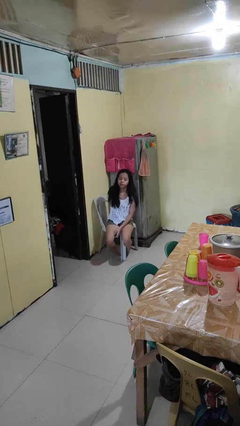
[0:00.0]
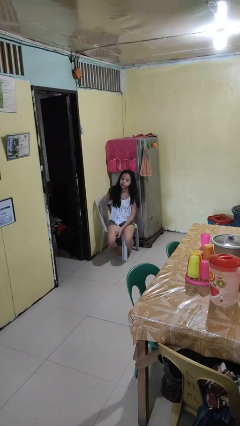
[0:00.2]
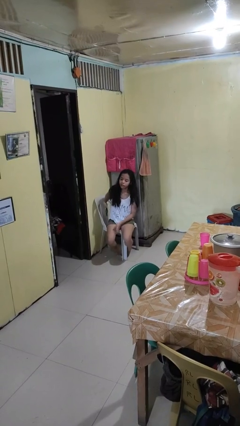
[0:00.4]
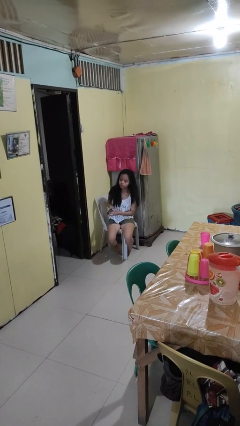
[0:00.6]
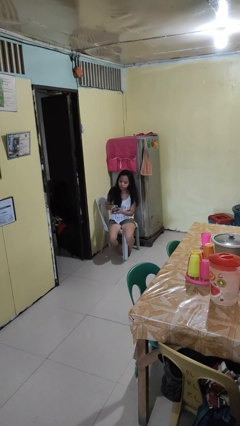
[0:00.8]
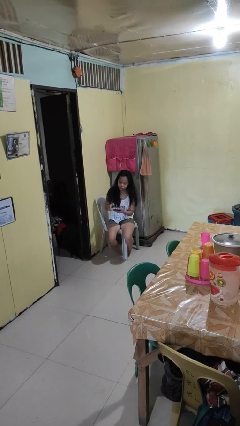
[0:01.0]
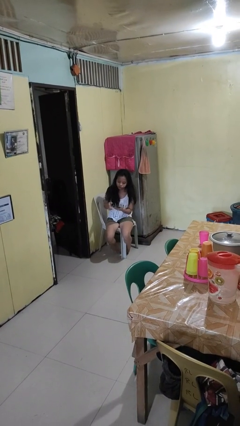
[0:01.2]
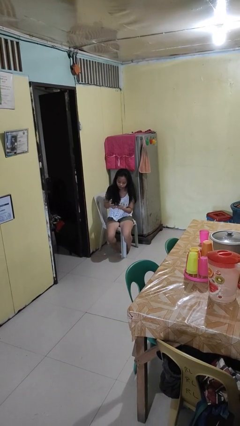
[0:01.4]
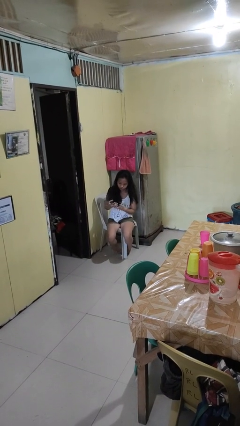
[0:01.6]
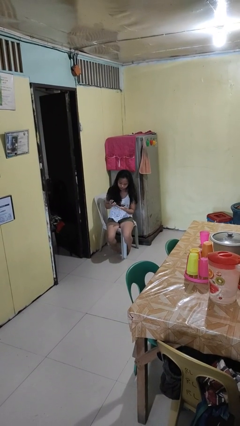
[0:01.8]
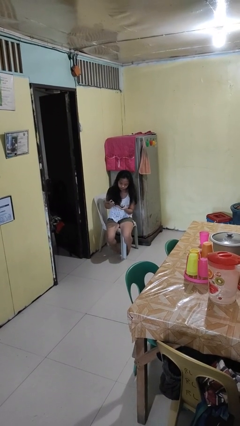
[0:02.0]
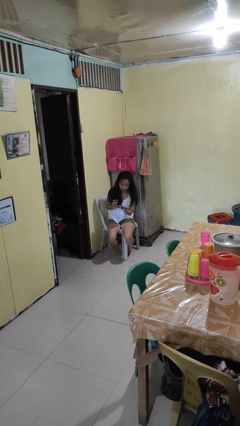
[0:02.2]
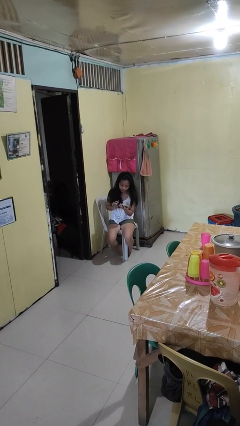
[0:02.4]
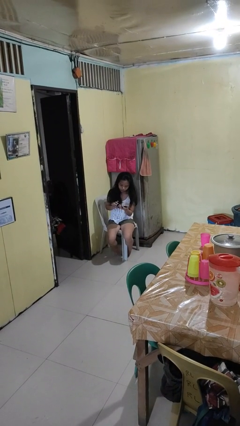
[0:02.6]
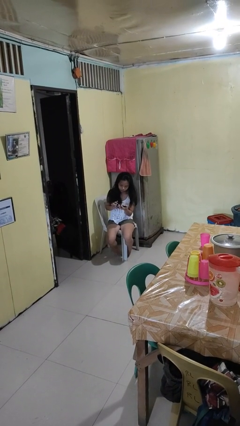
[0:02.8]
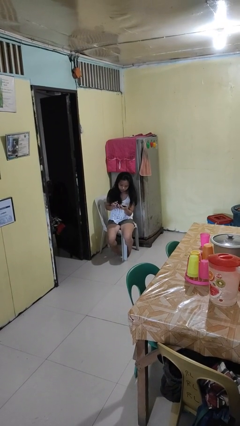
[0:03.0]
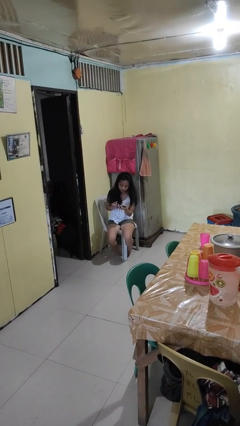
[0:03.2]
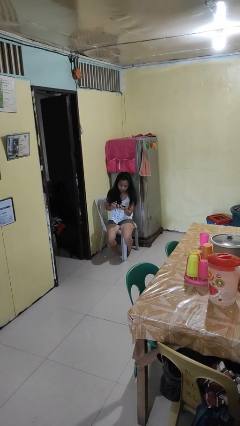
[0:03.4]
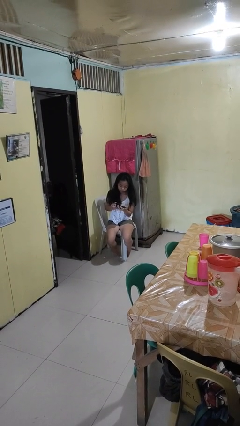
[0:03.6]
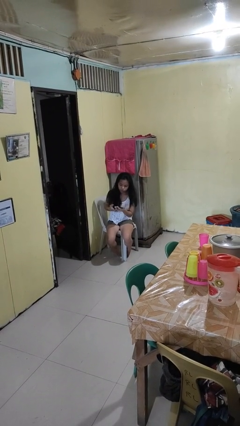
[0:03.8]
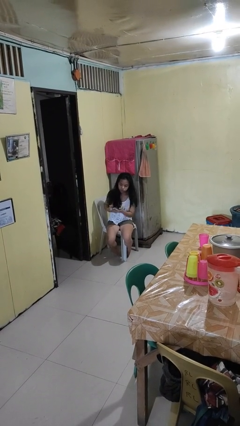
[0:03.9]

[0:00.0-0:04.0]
person takes phone from pocket

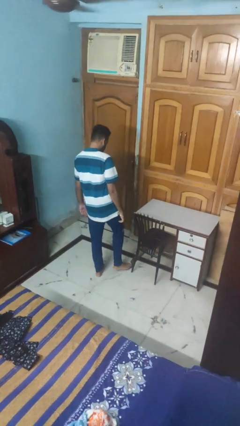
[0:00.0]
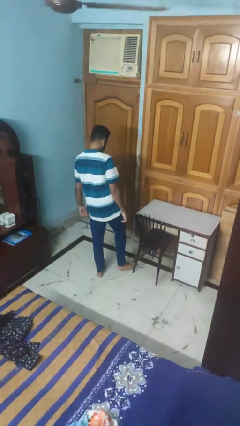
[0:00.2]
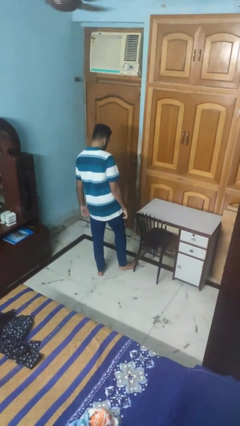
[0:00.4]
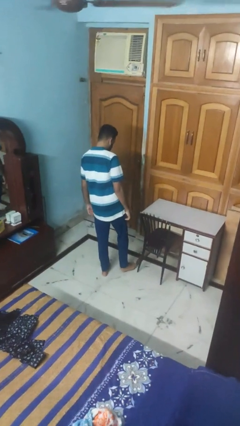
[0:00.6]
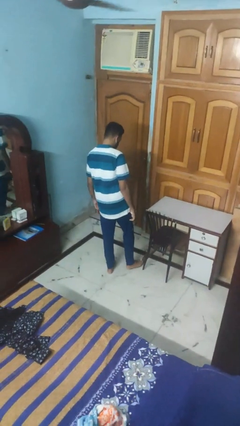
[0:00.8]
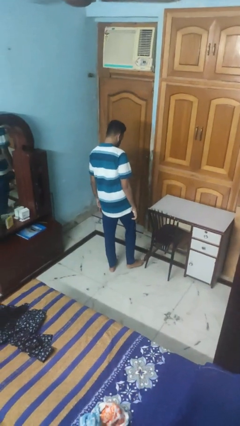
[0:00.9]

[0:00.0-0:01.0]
person stubs toe

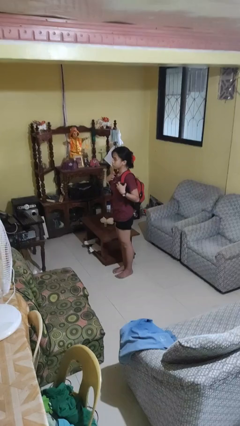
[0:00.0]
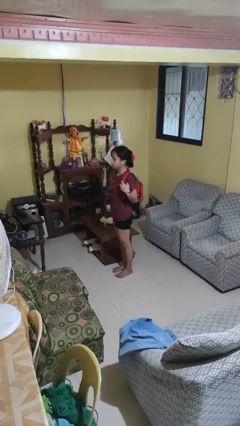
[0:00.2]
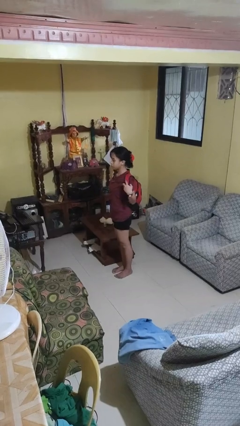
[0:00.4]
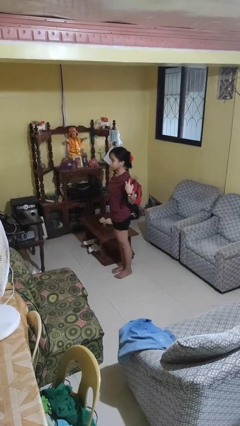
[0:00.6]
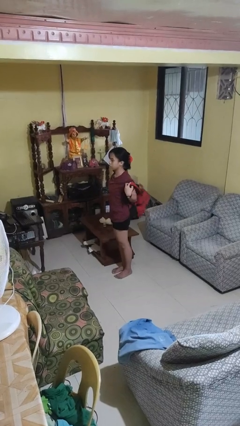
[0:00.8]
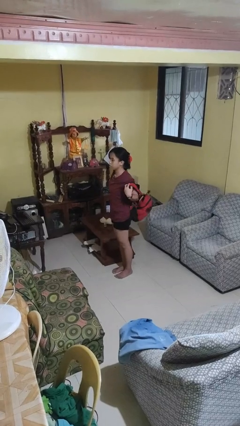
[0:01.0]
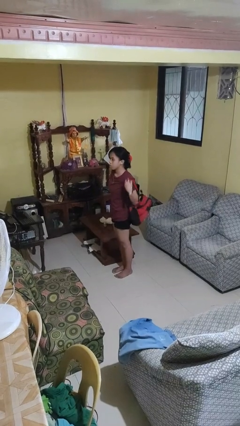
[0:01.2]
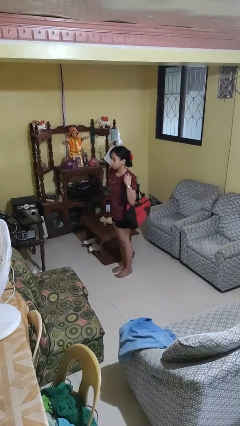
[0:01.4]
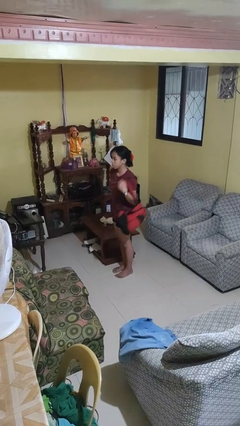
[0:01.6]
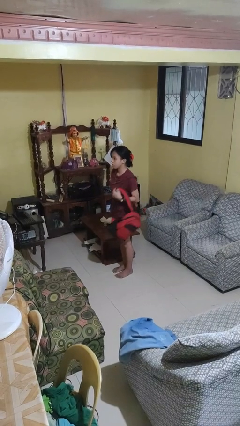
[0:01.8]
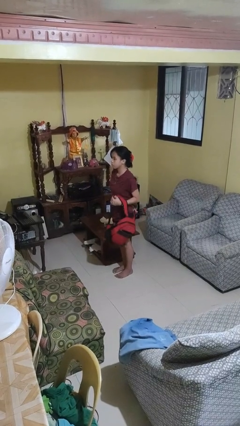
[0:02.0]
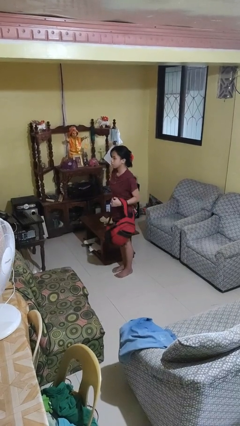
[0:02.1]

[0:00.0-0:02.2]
person takes off backpack

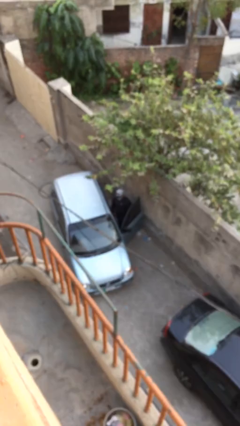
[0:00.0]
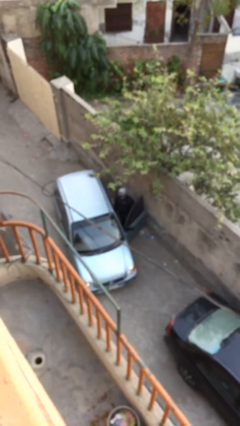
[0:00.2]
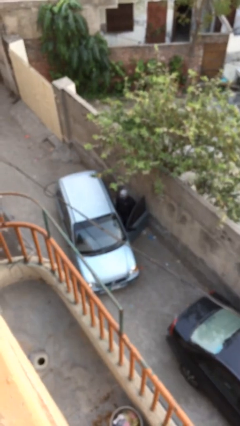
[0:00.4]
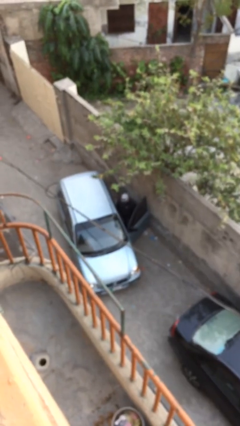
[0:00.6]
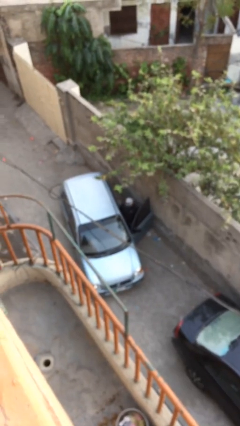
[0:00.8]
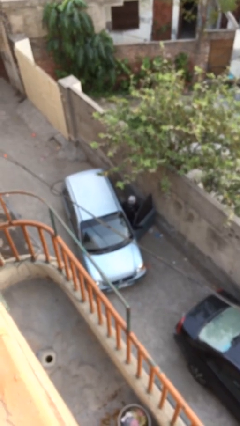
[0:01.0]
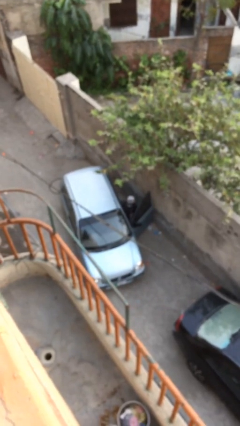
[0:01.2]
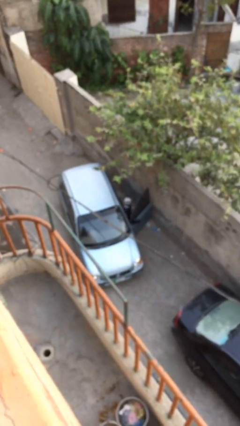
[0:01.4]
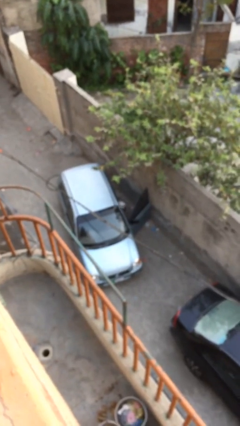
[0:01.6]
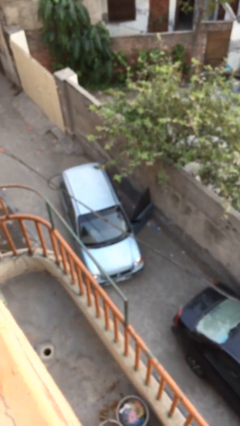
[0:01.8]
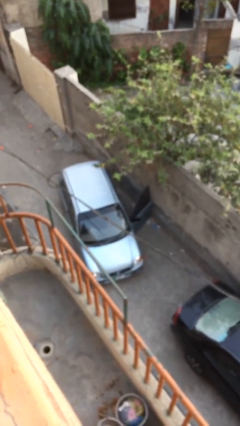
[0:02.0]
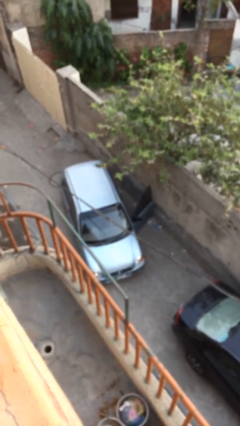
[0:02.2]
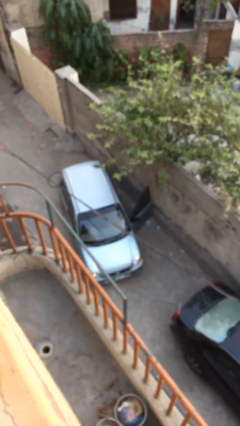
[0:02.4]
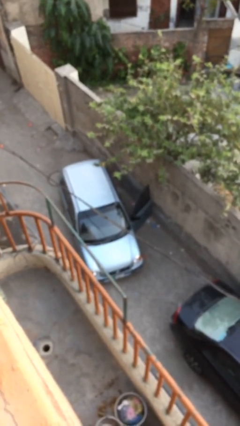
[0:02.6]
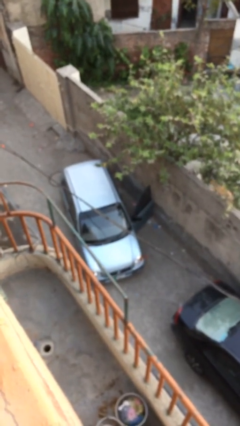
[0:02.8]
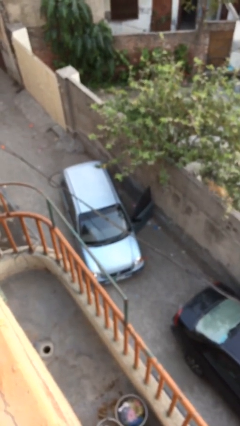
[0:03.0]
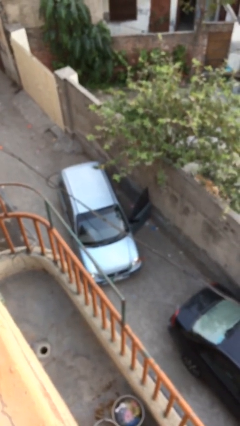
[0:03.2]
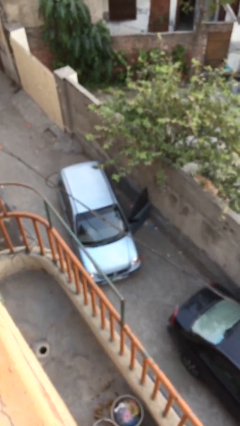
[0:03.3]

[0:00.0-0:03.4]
person enters car

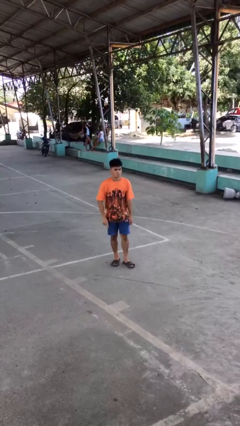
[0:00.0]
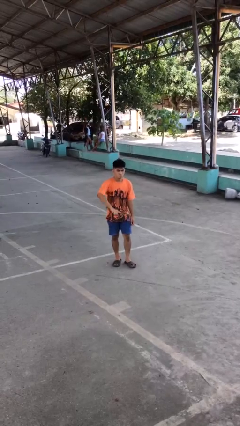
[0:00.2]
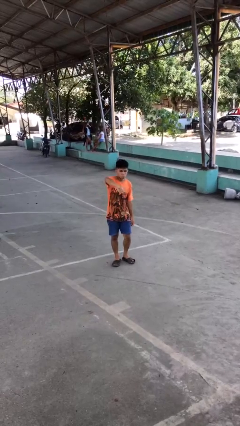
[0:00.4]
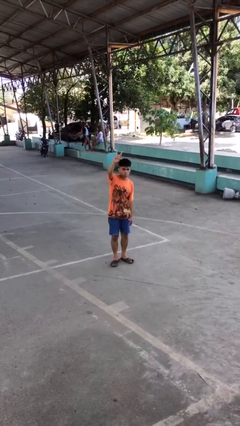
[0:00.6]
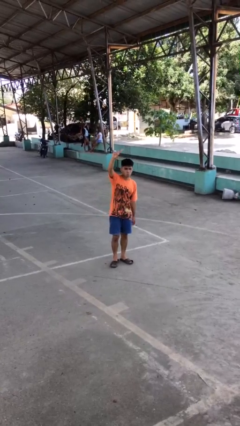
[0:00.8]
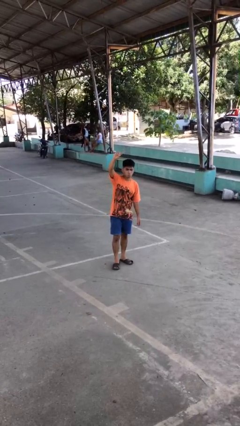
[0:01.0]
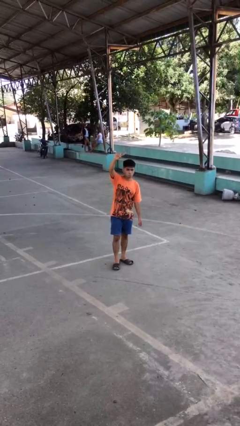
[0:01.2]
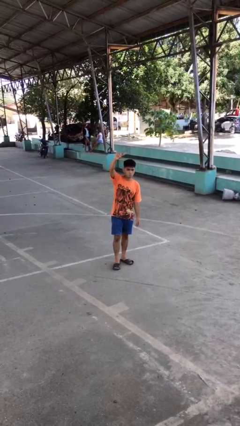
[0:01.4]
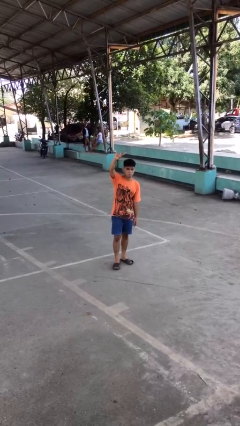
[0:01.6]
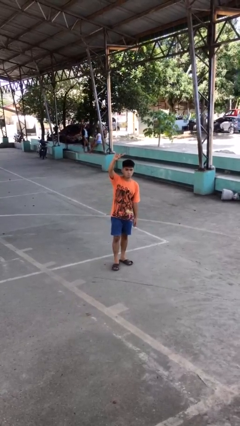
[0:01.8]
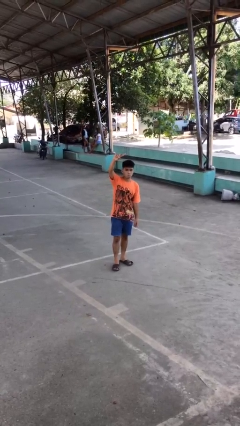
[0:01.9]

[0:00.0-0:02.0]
person gestures swipe up

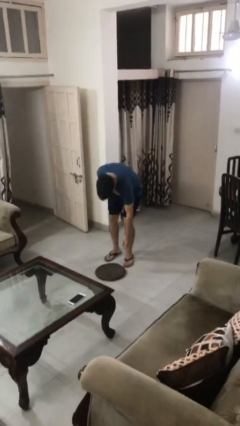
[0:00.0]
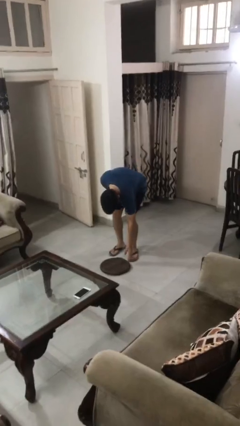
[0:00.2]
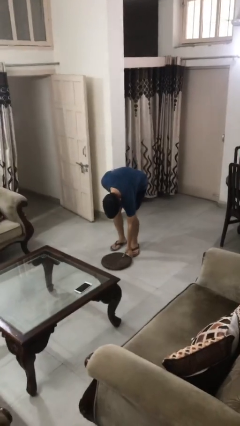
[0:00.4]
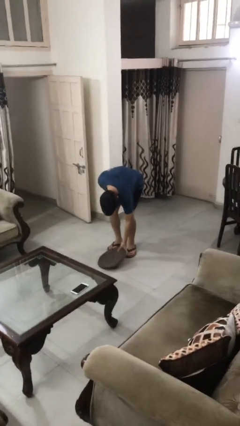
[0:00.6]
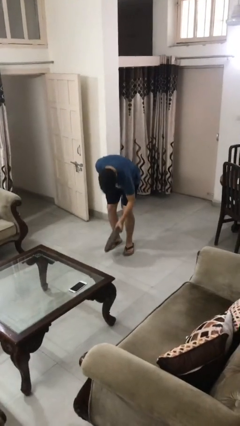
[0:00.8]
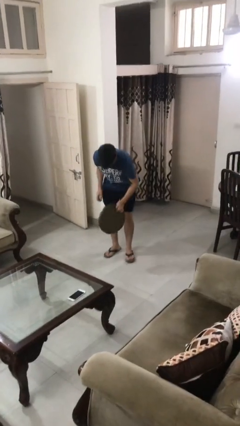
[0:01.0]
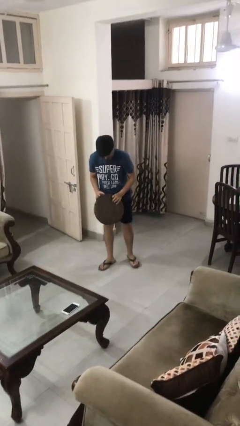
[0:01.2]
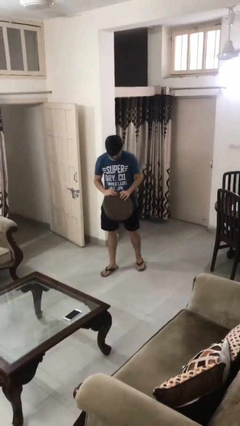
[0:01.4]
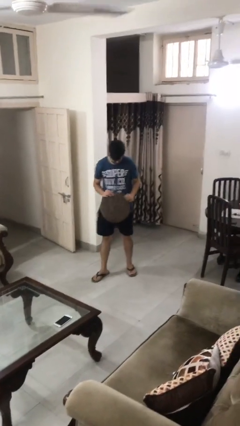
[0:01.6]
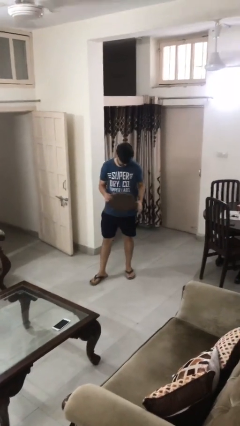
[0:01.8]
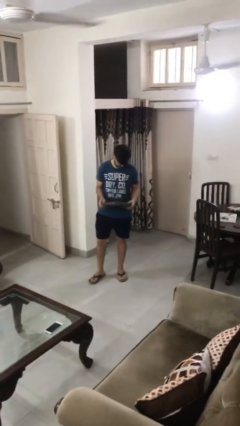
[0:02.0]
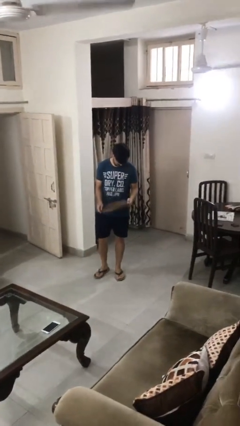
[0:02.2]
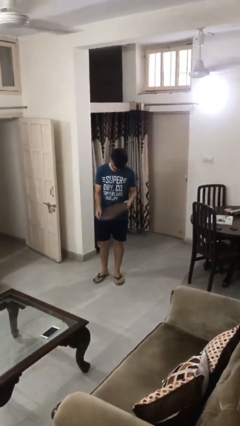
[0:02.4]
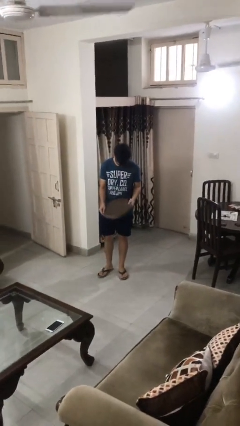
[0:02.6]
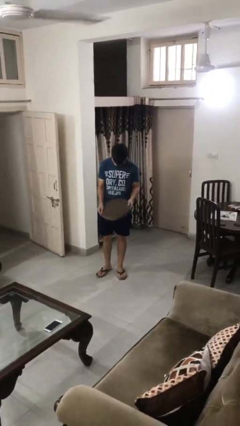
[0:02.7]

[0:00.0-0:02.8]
person picks up object from floor

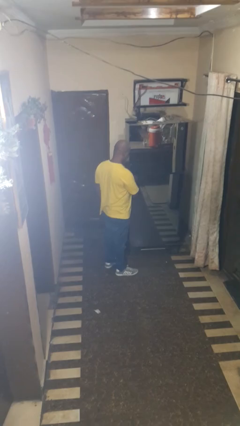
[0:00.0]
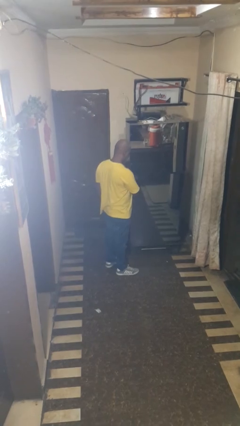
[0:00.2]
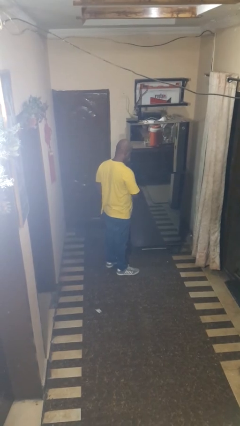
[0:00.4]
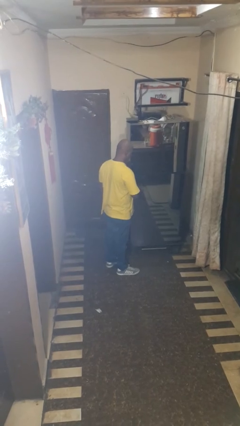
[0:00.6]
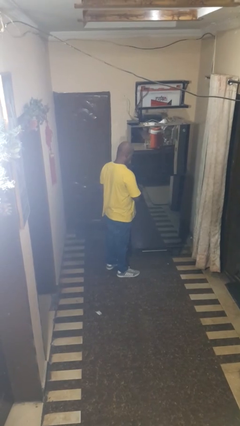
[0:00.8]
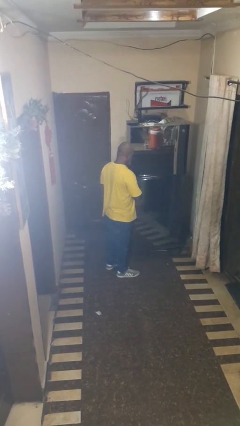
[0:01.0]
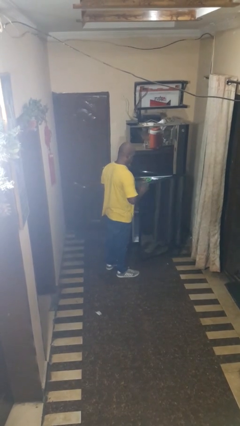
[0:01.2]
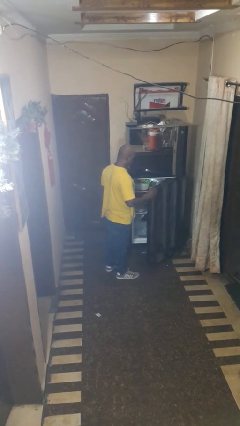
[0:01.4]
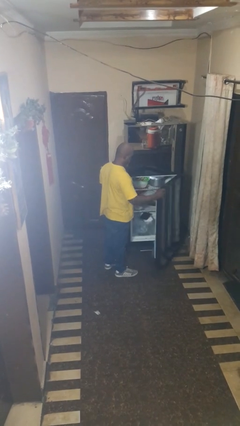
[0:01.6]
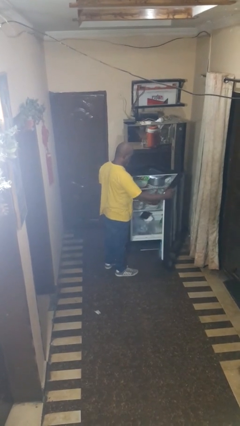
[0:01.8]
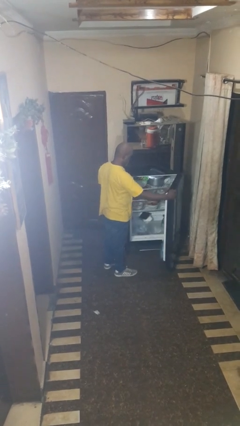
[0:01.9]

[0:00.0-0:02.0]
person opens refrigerator
